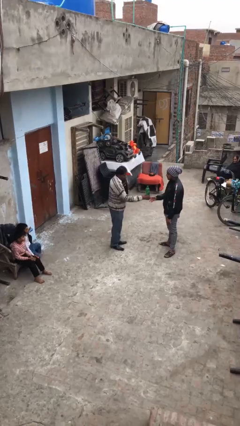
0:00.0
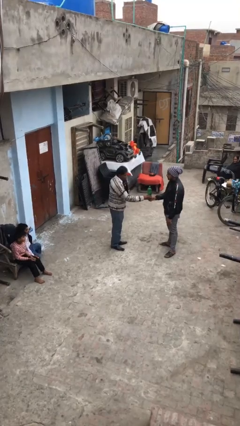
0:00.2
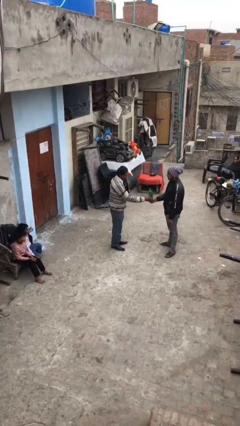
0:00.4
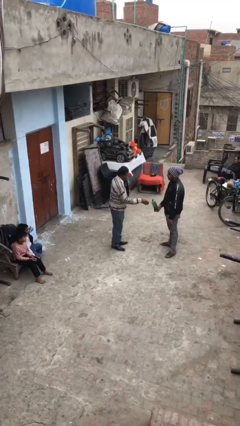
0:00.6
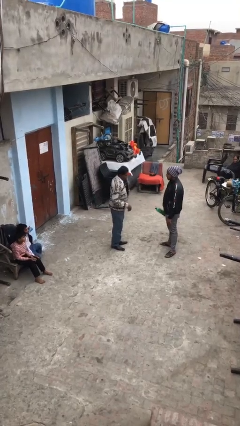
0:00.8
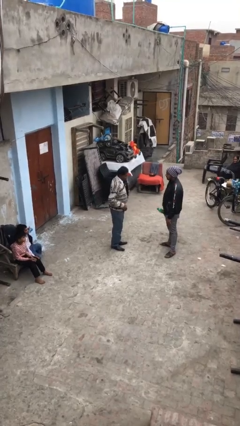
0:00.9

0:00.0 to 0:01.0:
person transfers object to person

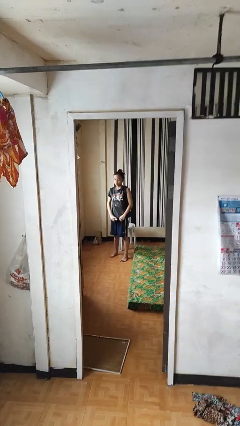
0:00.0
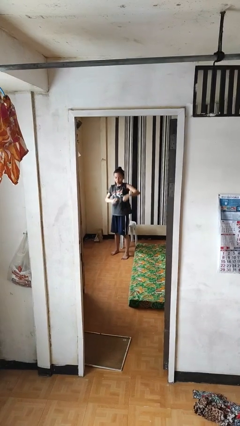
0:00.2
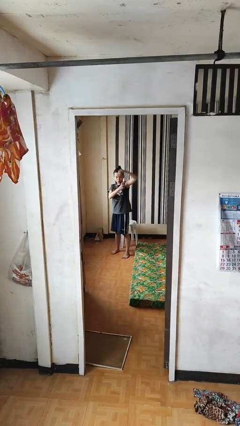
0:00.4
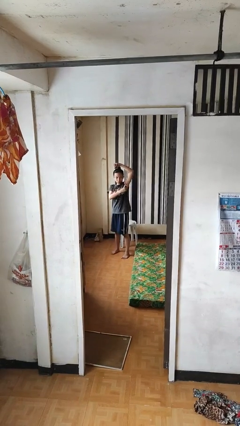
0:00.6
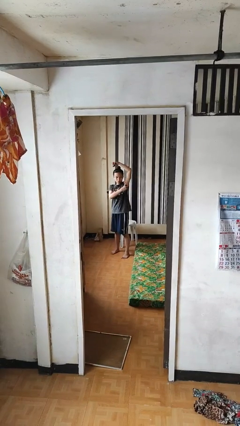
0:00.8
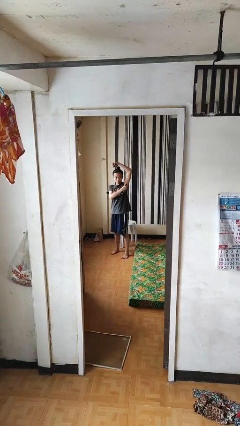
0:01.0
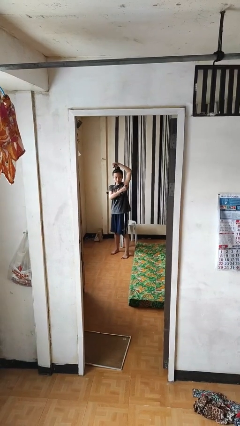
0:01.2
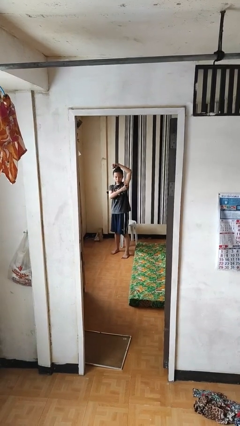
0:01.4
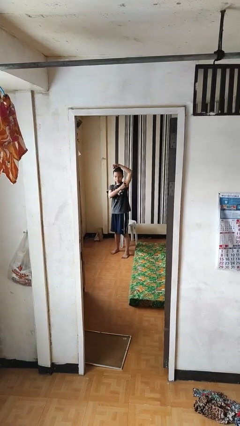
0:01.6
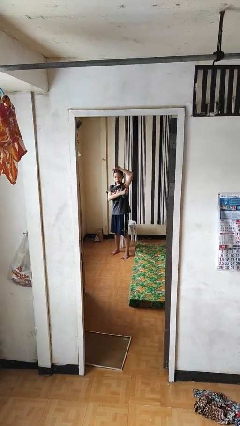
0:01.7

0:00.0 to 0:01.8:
person applies deodorant

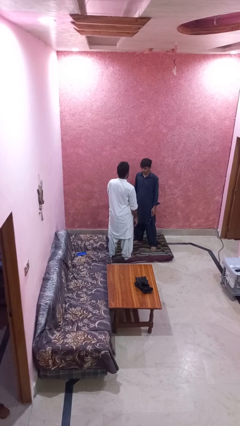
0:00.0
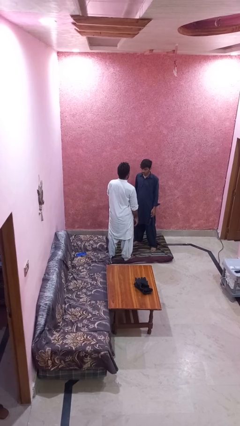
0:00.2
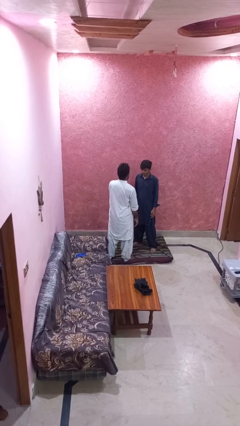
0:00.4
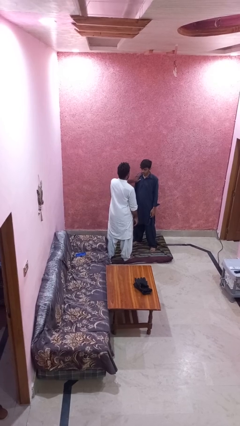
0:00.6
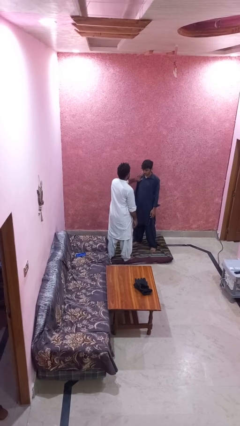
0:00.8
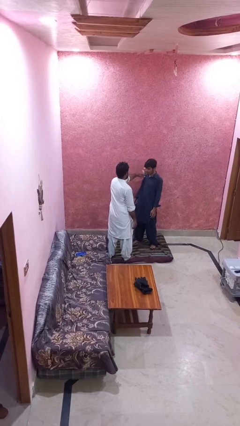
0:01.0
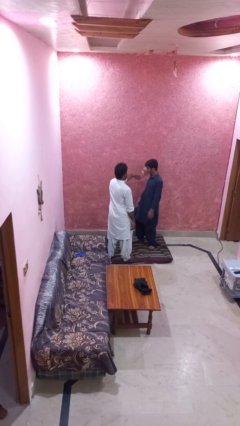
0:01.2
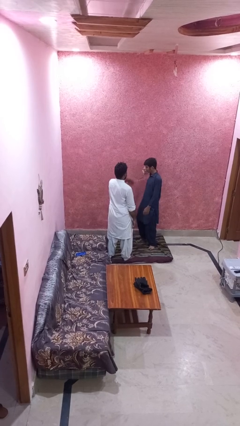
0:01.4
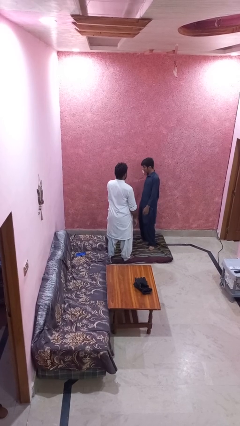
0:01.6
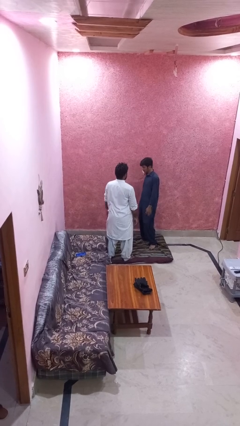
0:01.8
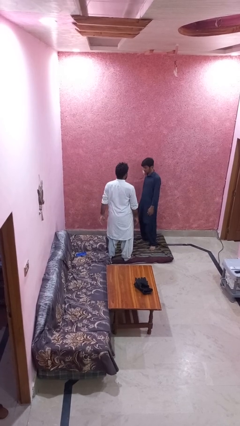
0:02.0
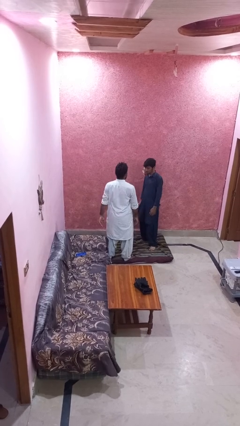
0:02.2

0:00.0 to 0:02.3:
person shoves person

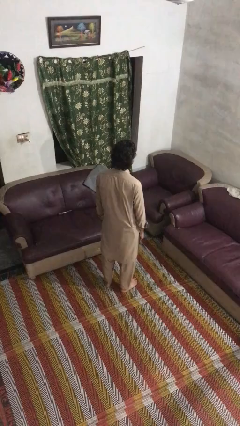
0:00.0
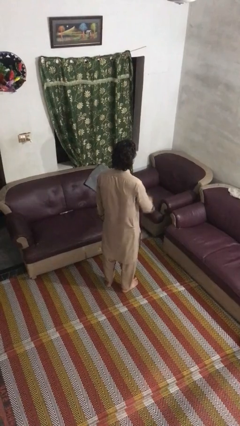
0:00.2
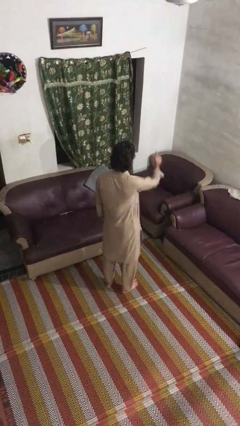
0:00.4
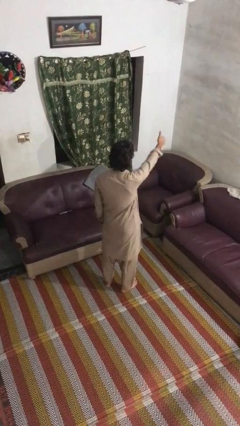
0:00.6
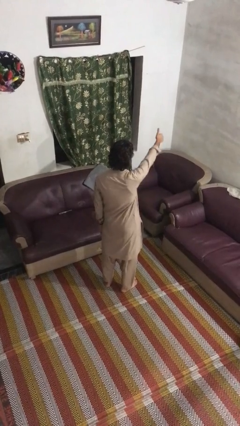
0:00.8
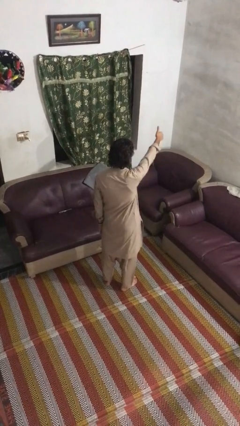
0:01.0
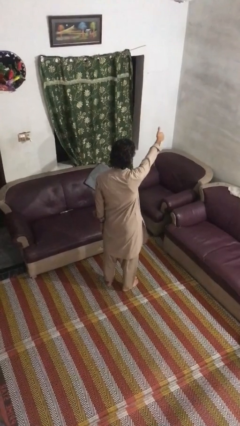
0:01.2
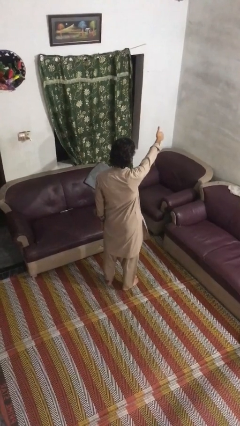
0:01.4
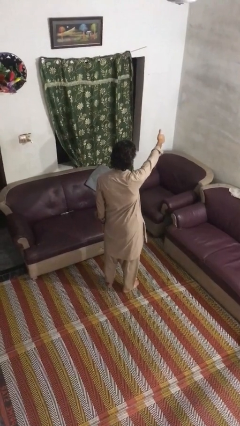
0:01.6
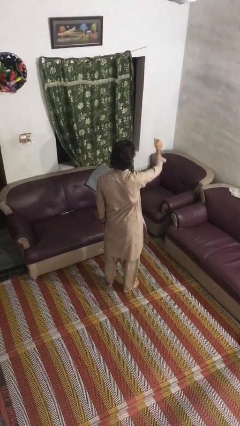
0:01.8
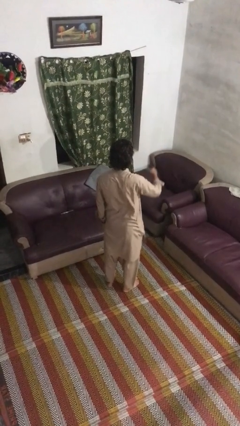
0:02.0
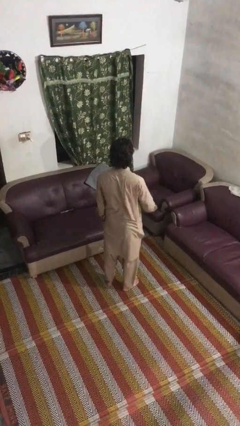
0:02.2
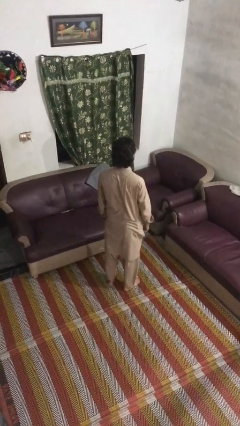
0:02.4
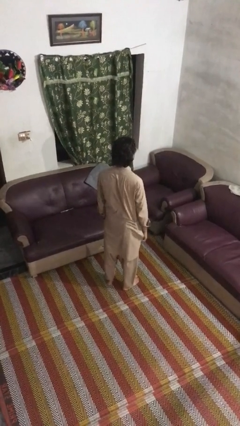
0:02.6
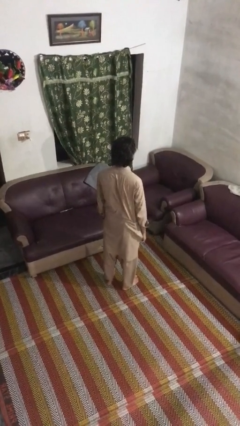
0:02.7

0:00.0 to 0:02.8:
person gestures thumbs up

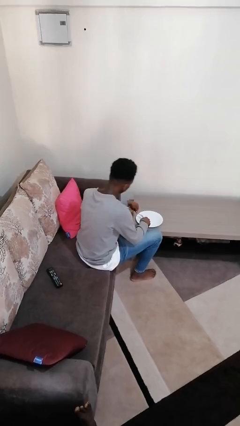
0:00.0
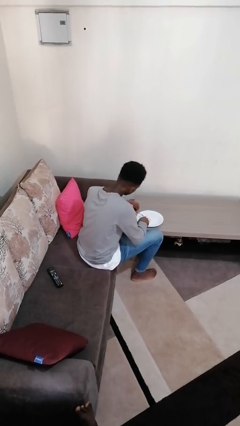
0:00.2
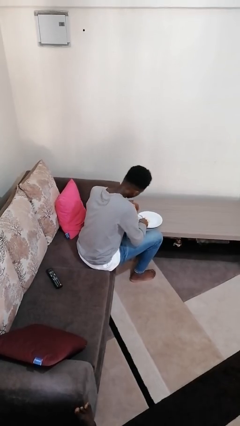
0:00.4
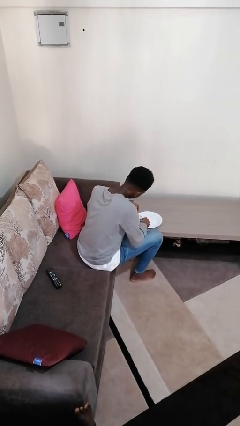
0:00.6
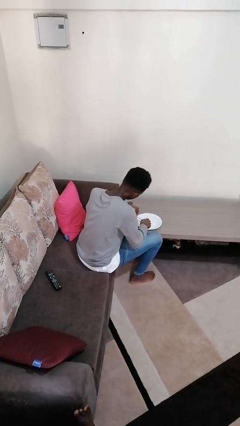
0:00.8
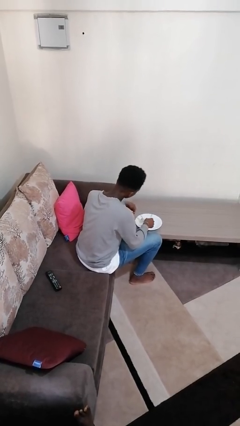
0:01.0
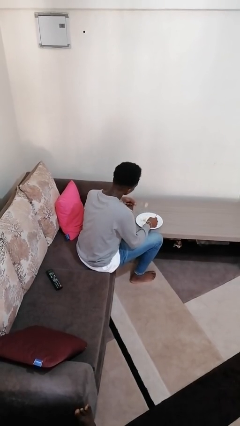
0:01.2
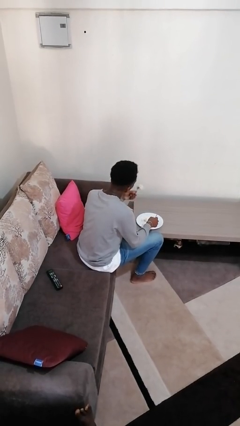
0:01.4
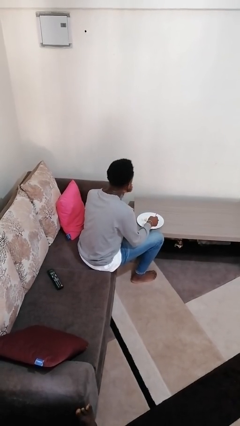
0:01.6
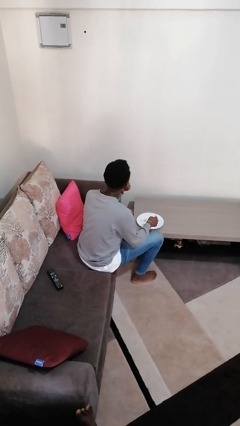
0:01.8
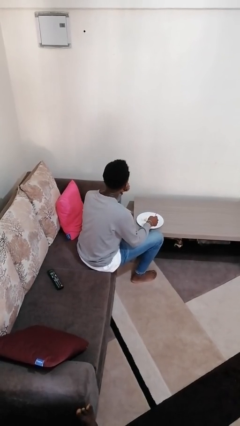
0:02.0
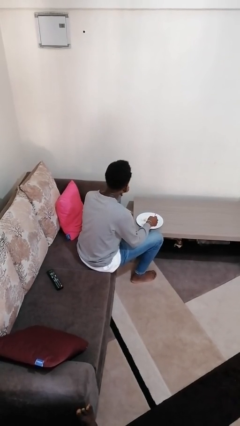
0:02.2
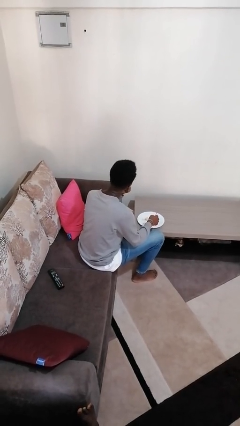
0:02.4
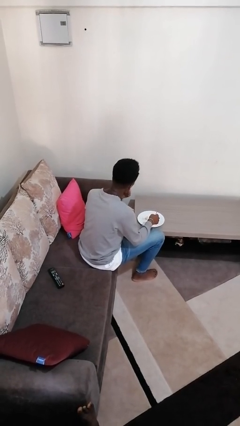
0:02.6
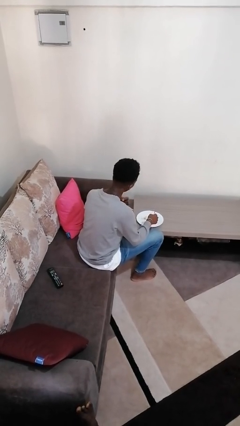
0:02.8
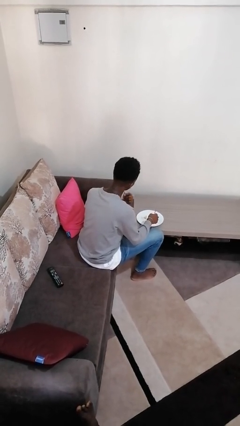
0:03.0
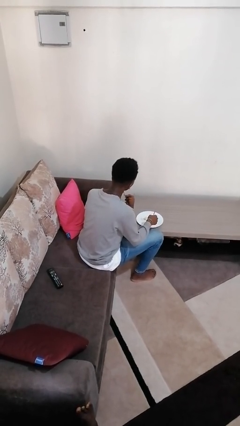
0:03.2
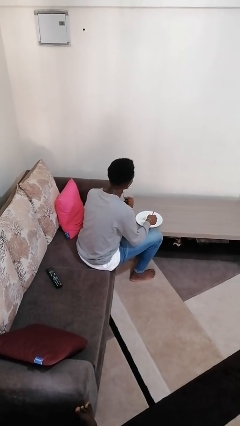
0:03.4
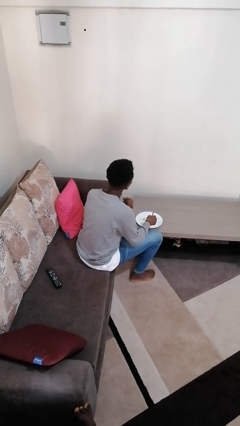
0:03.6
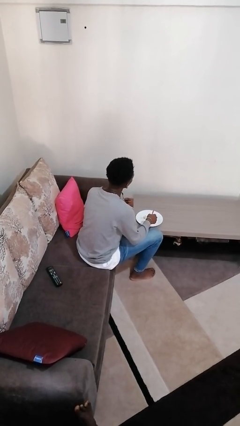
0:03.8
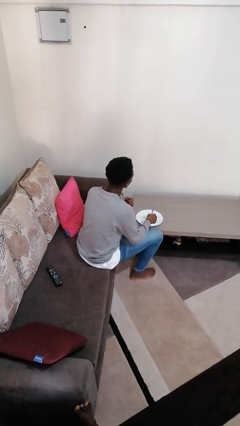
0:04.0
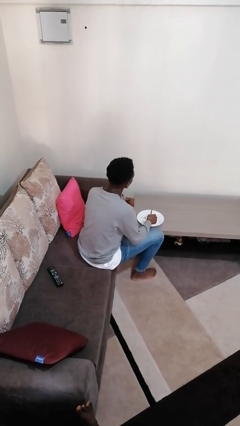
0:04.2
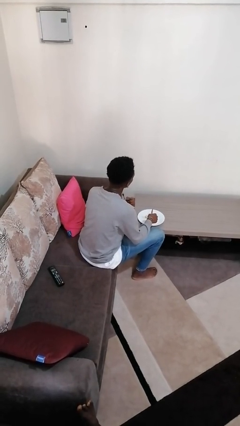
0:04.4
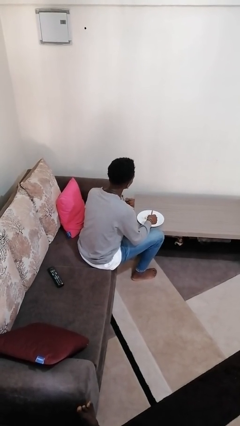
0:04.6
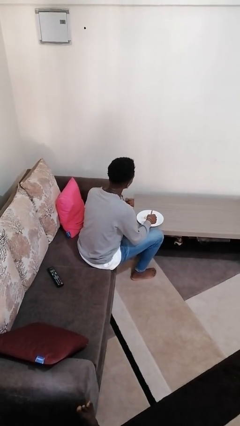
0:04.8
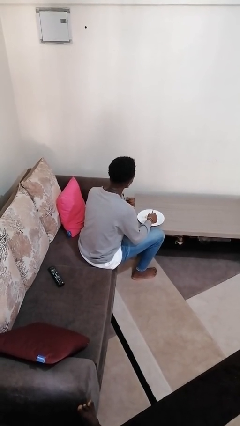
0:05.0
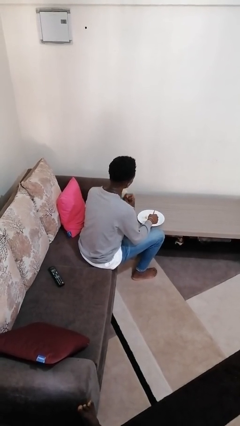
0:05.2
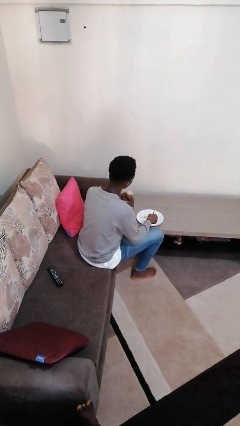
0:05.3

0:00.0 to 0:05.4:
person eats with utensil

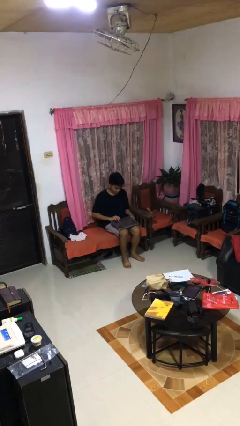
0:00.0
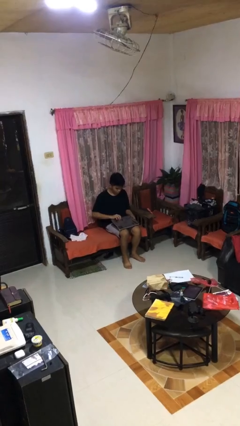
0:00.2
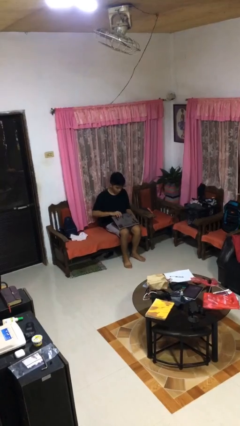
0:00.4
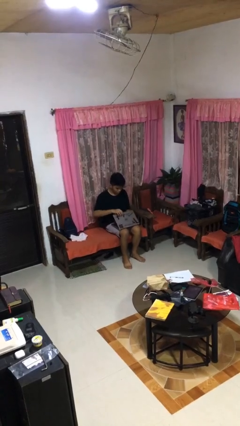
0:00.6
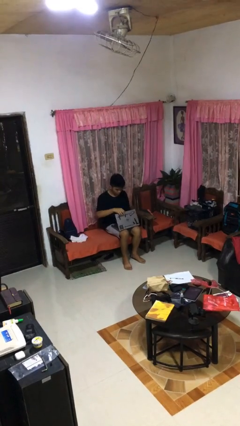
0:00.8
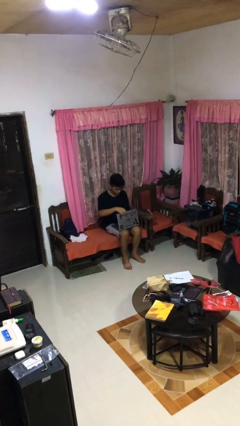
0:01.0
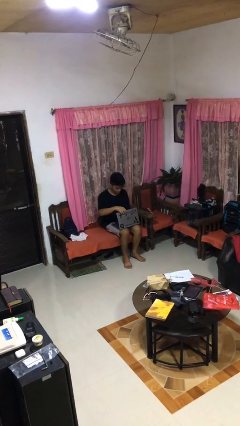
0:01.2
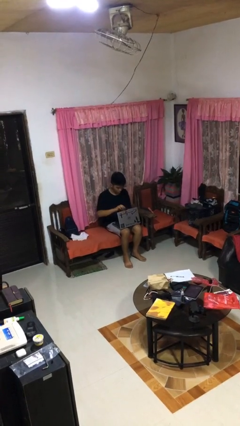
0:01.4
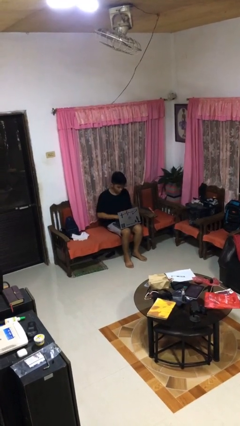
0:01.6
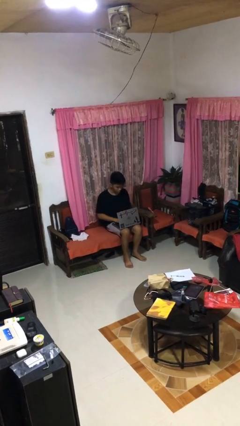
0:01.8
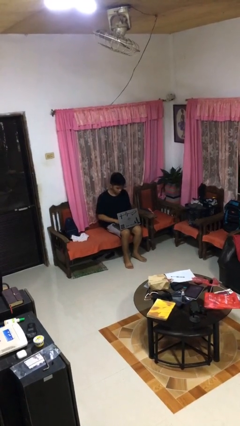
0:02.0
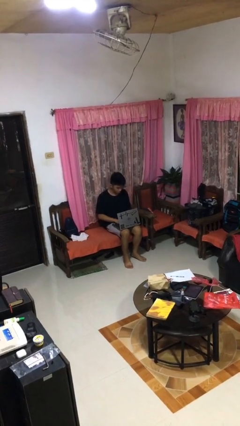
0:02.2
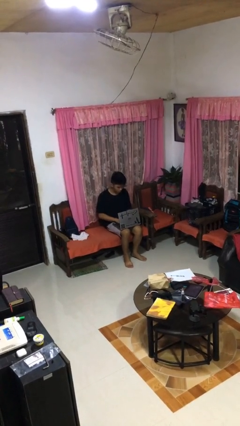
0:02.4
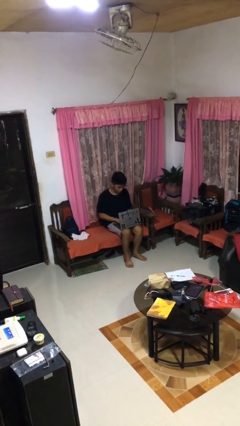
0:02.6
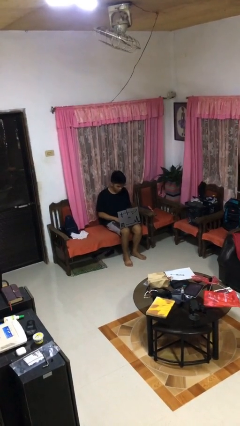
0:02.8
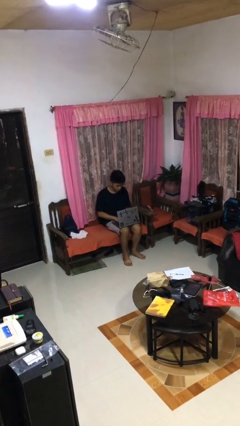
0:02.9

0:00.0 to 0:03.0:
person opens laptop

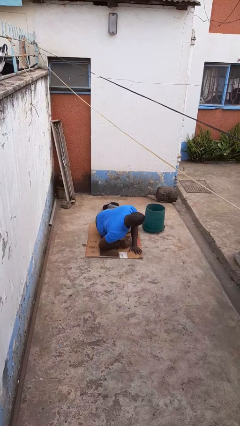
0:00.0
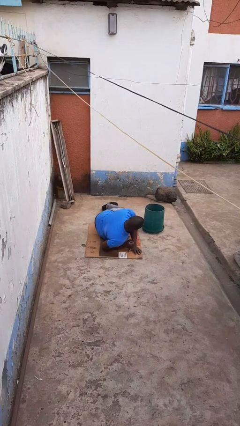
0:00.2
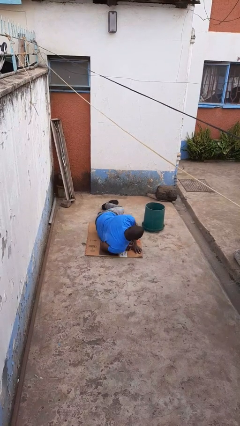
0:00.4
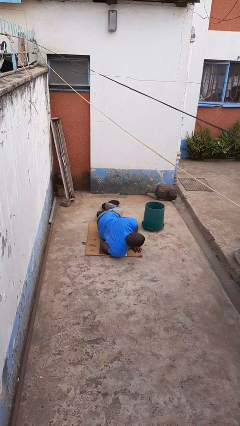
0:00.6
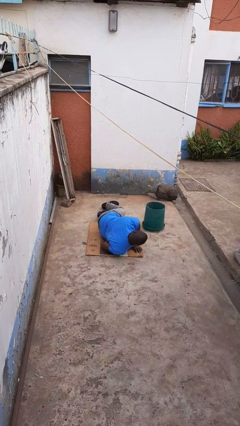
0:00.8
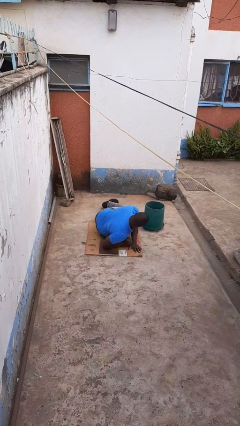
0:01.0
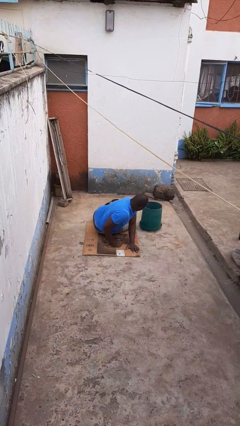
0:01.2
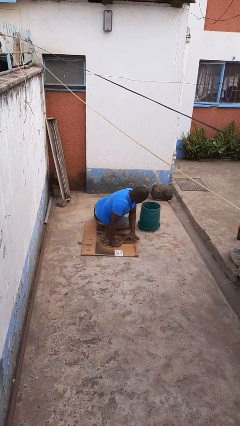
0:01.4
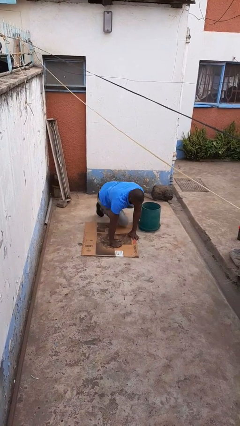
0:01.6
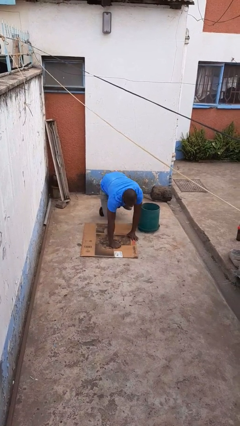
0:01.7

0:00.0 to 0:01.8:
person stands up from floor
